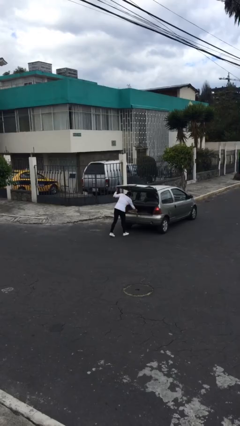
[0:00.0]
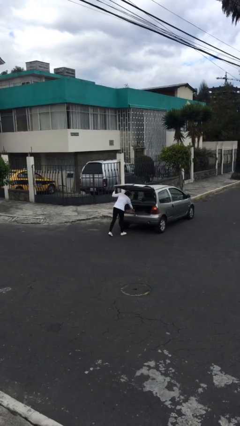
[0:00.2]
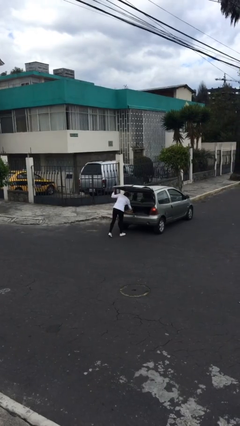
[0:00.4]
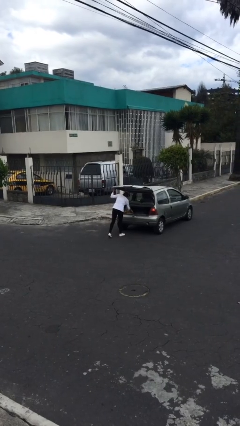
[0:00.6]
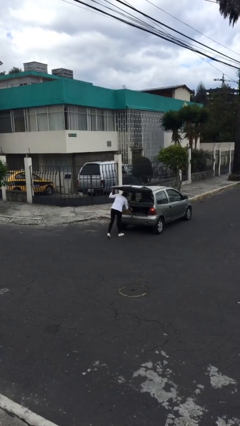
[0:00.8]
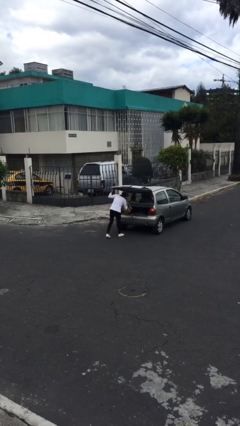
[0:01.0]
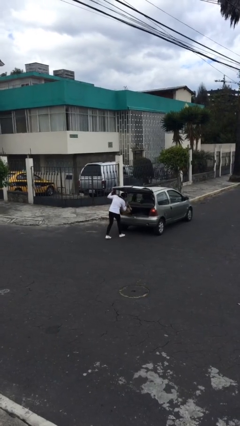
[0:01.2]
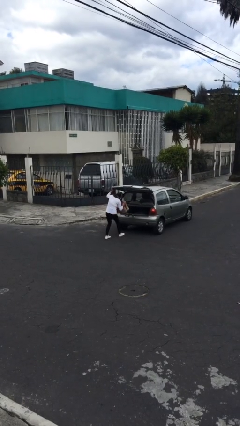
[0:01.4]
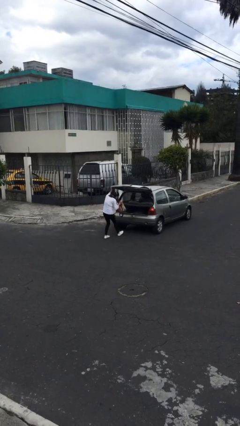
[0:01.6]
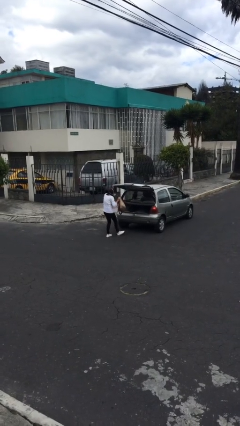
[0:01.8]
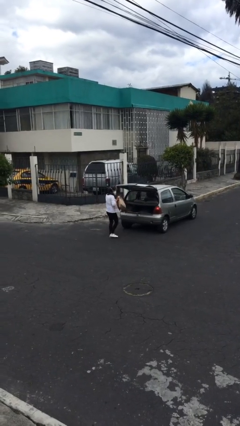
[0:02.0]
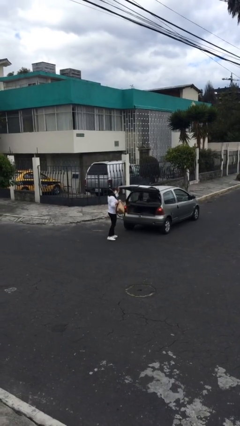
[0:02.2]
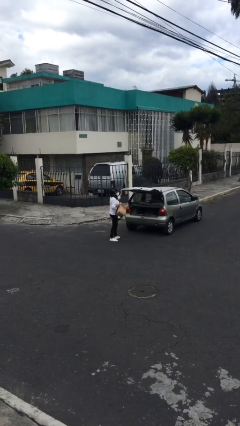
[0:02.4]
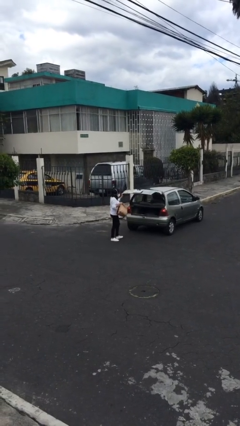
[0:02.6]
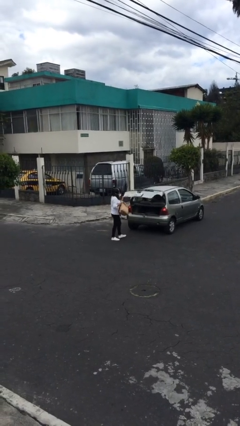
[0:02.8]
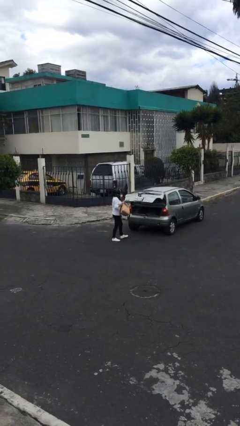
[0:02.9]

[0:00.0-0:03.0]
person unloads car

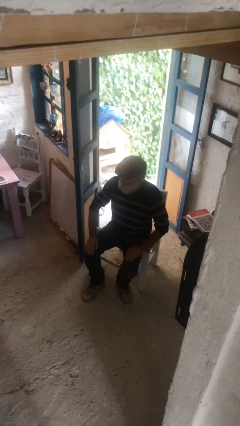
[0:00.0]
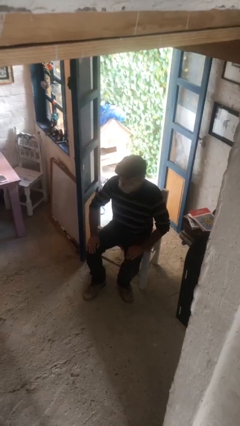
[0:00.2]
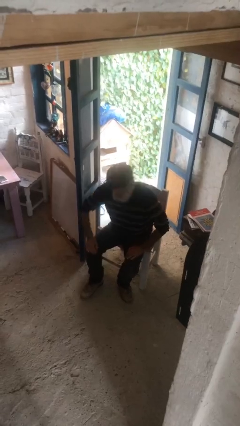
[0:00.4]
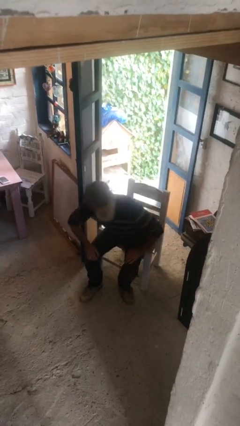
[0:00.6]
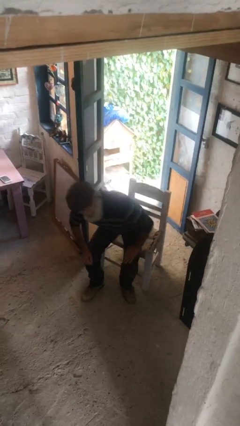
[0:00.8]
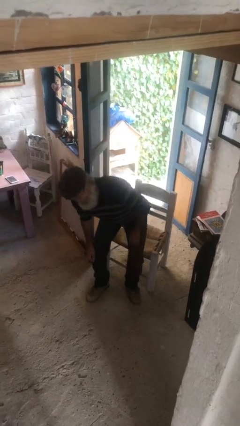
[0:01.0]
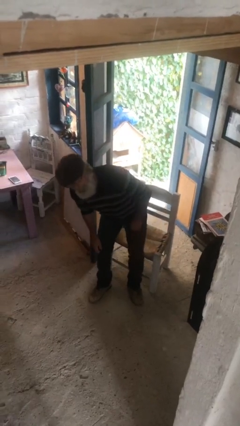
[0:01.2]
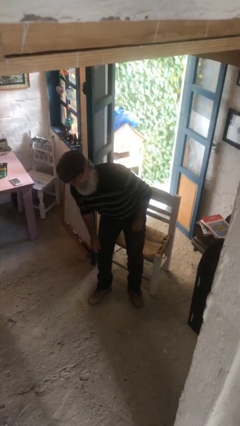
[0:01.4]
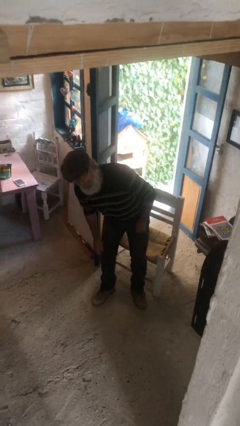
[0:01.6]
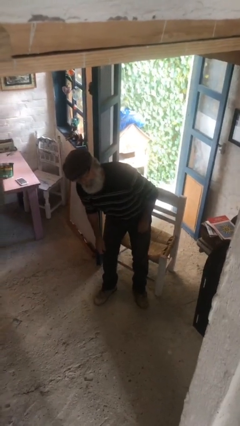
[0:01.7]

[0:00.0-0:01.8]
person stands up

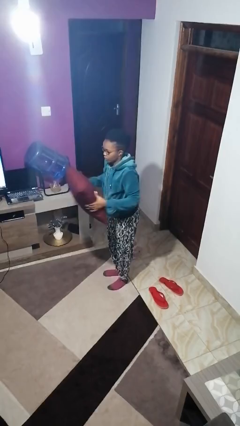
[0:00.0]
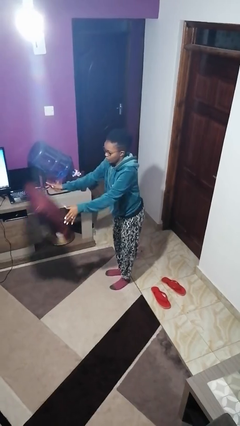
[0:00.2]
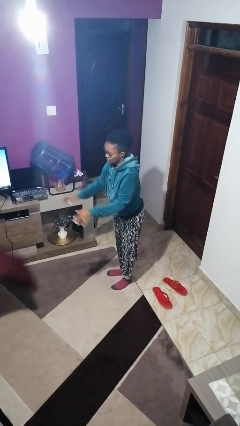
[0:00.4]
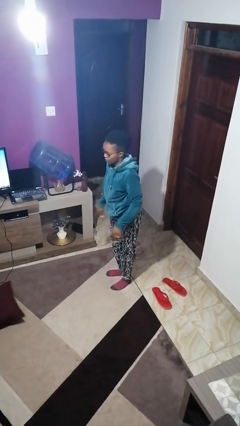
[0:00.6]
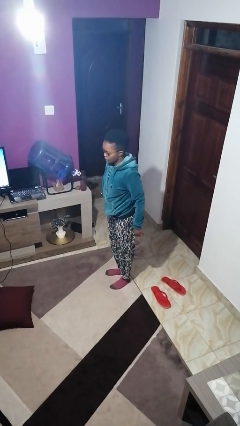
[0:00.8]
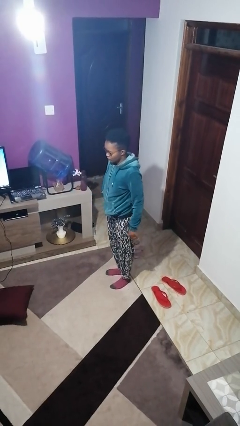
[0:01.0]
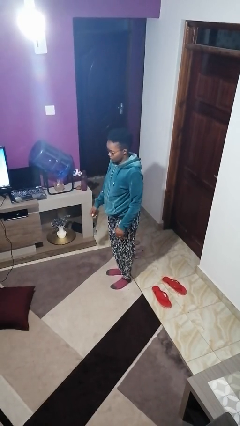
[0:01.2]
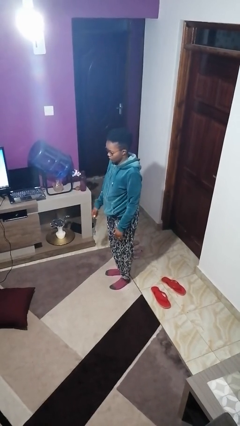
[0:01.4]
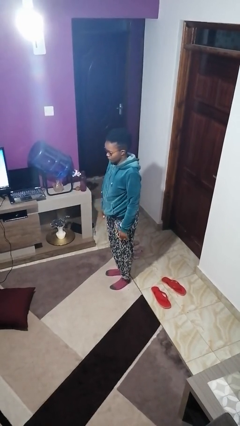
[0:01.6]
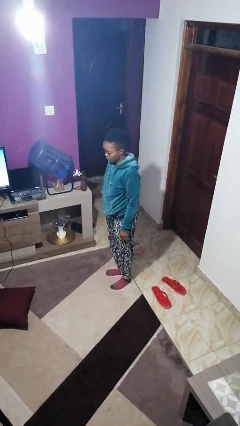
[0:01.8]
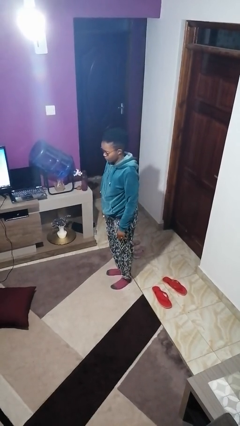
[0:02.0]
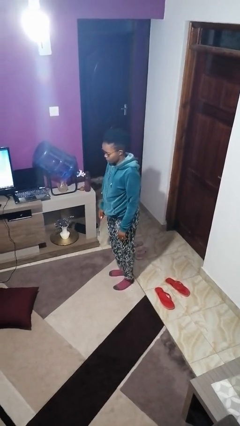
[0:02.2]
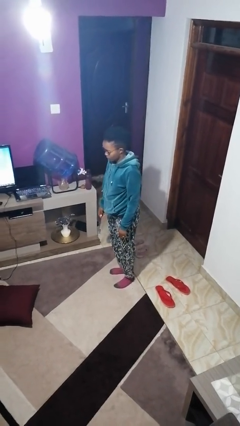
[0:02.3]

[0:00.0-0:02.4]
person throws object to ground

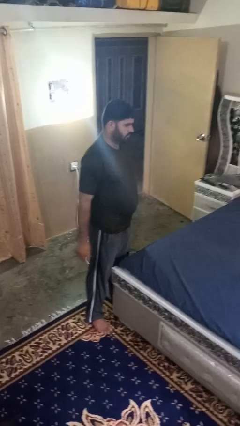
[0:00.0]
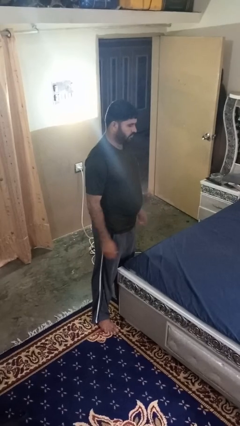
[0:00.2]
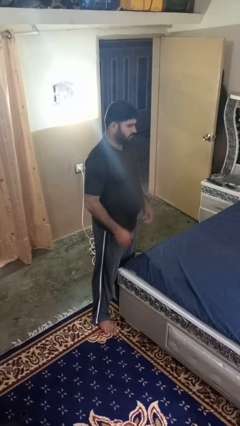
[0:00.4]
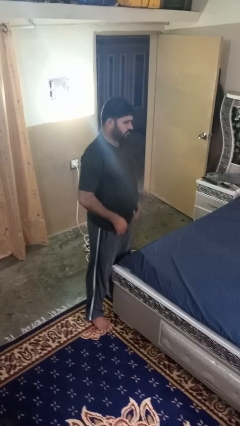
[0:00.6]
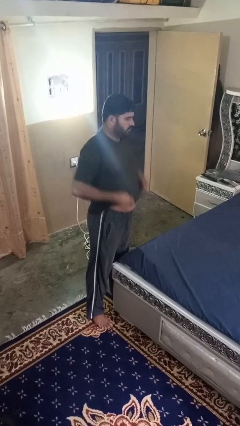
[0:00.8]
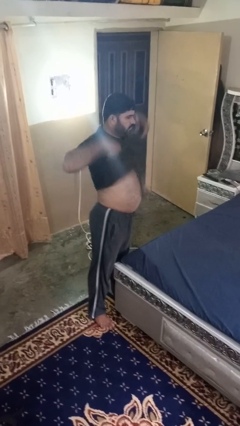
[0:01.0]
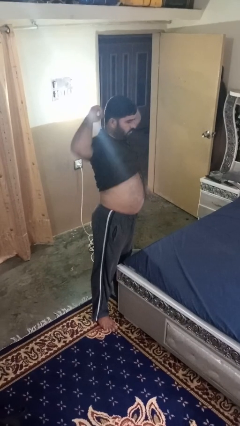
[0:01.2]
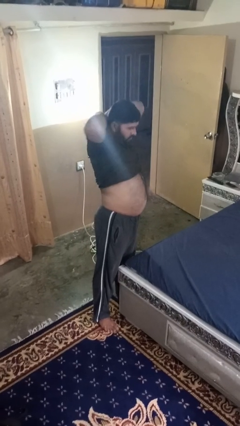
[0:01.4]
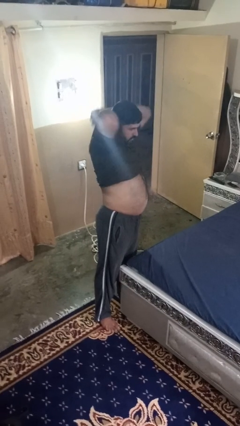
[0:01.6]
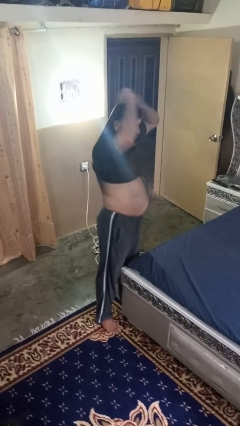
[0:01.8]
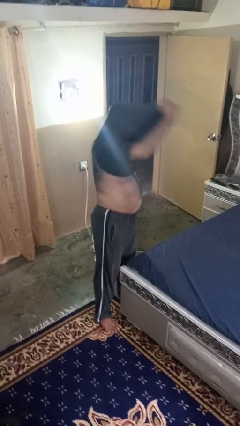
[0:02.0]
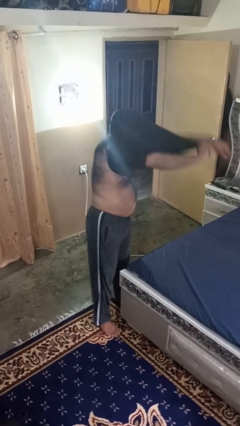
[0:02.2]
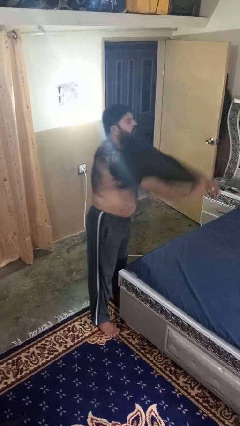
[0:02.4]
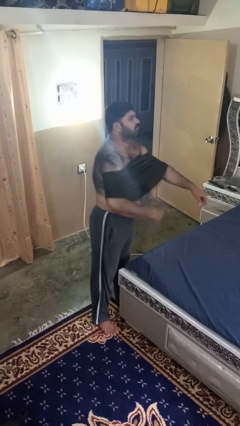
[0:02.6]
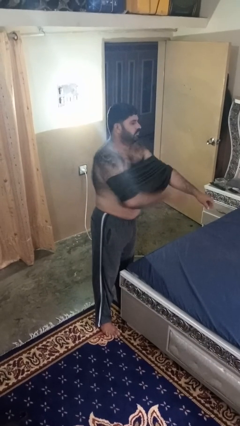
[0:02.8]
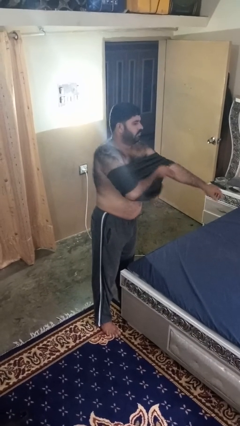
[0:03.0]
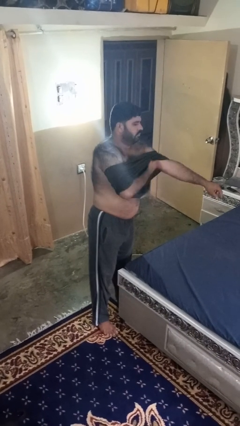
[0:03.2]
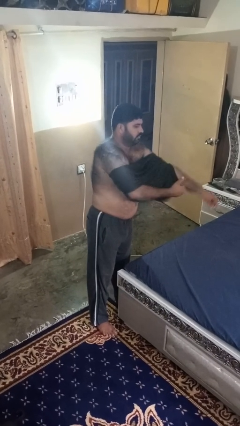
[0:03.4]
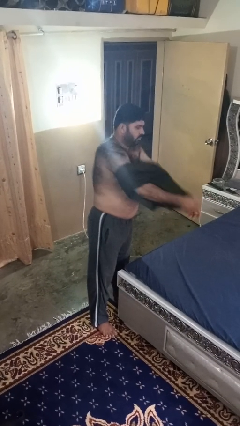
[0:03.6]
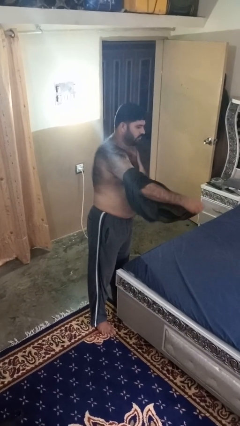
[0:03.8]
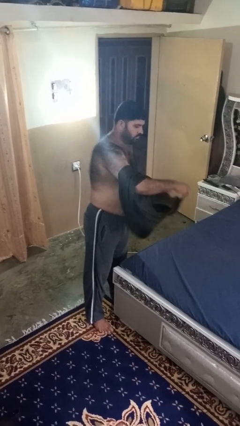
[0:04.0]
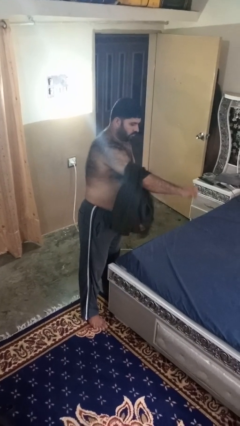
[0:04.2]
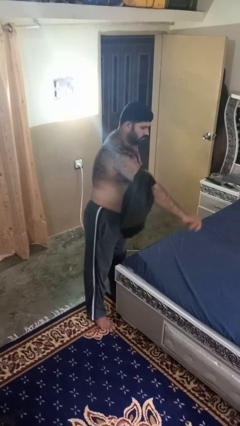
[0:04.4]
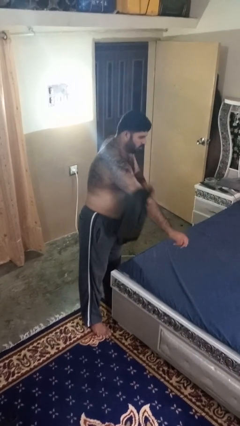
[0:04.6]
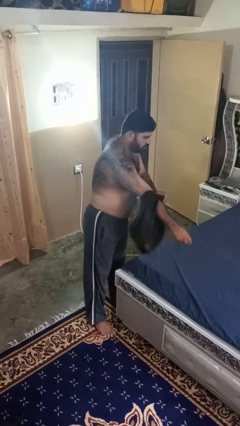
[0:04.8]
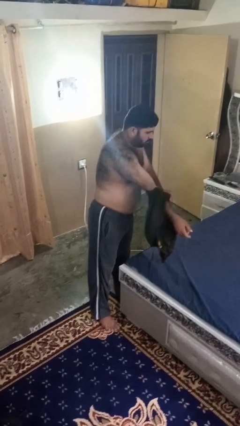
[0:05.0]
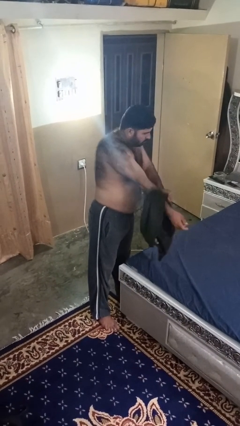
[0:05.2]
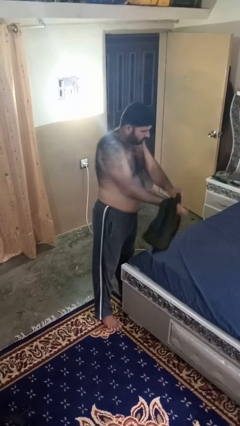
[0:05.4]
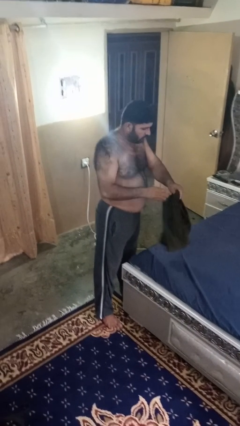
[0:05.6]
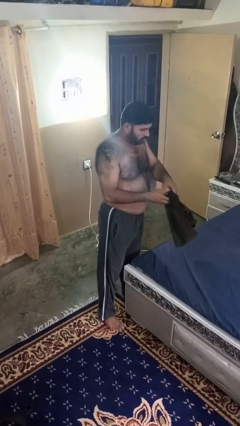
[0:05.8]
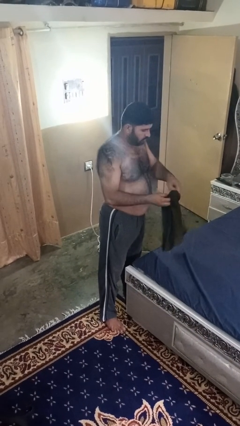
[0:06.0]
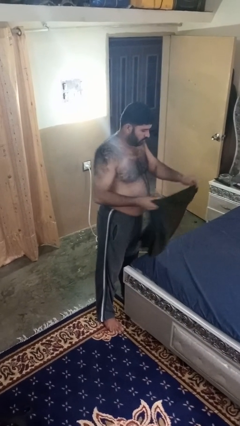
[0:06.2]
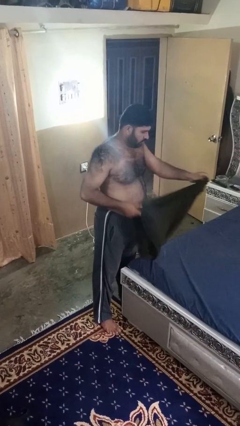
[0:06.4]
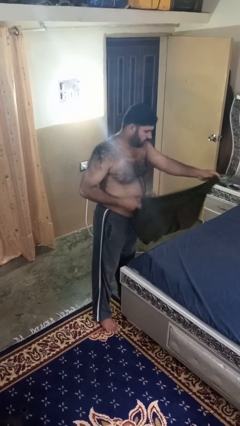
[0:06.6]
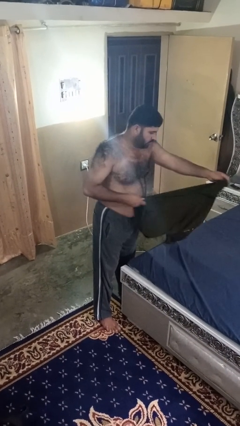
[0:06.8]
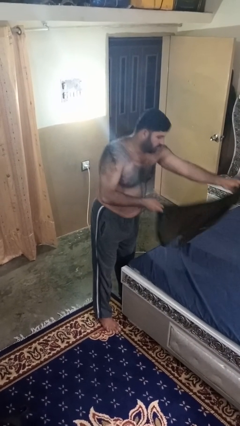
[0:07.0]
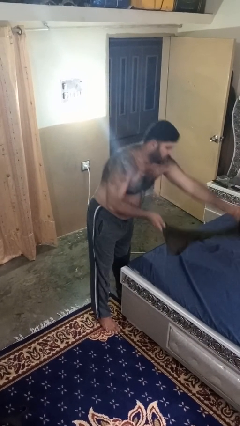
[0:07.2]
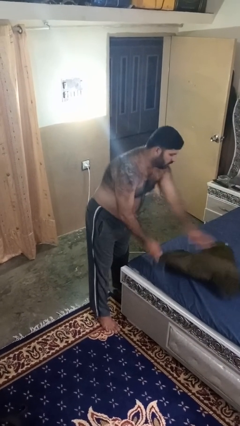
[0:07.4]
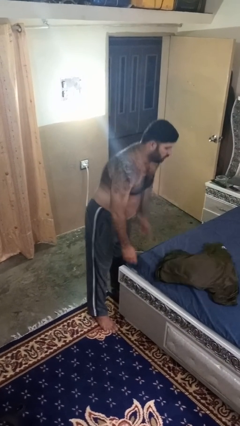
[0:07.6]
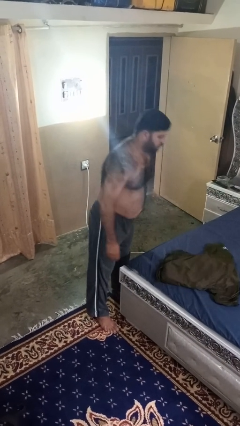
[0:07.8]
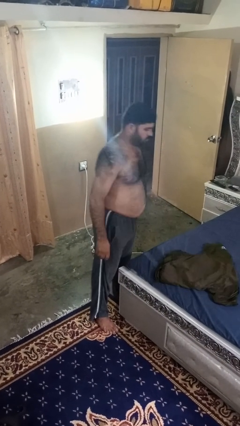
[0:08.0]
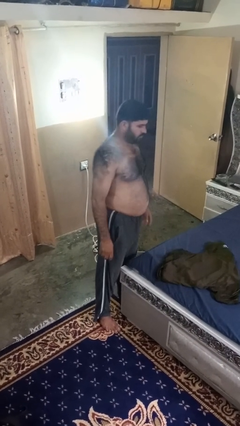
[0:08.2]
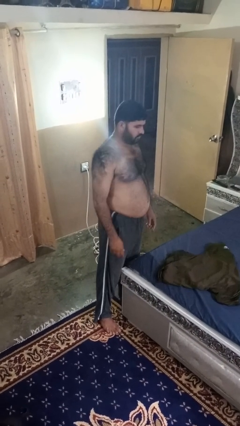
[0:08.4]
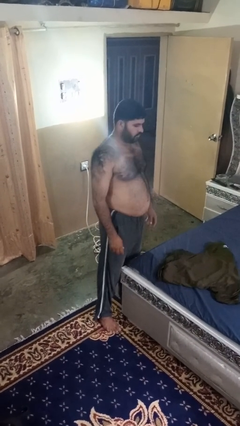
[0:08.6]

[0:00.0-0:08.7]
person takes off shirt

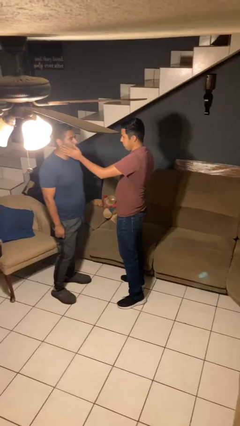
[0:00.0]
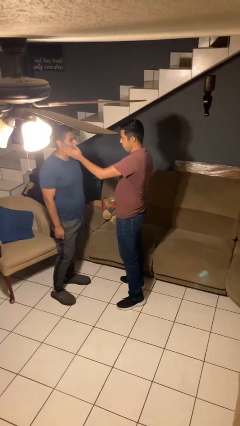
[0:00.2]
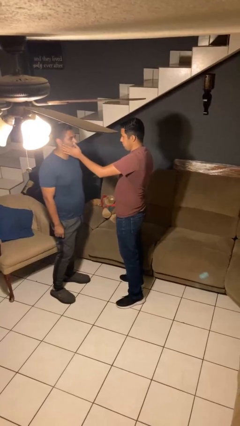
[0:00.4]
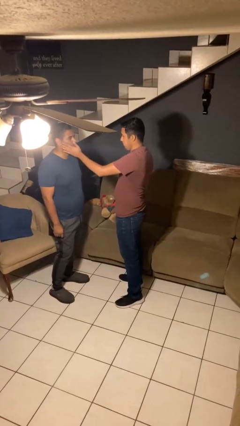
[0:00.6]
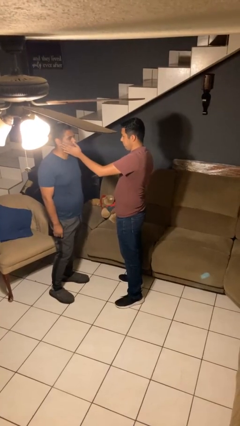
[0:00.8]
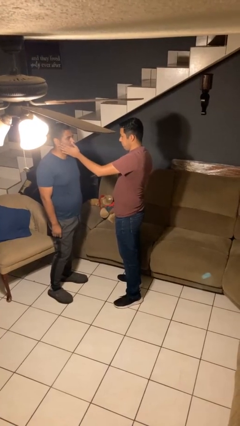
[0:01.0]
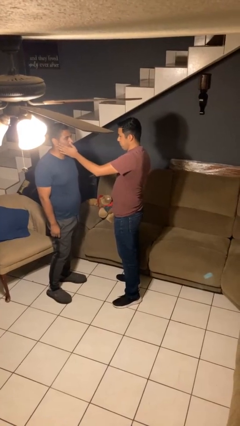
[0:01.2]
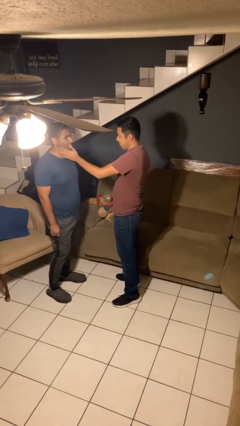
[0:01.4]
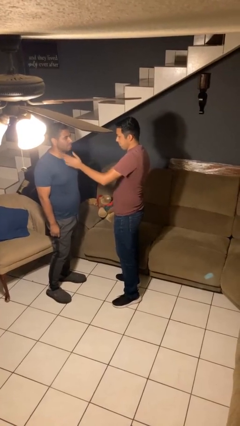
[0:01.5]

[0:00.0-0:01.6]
person touches face of person

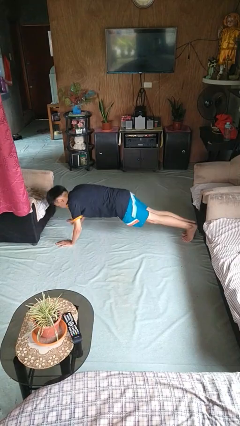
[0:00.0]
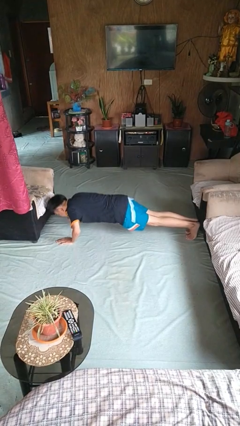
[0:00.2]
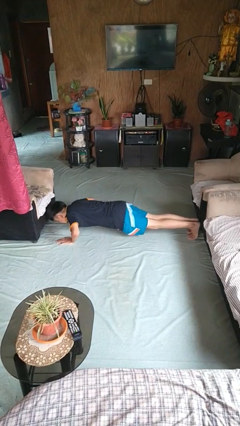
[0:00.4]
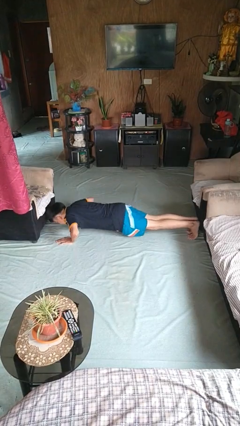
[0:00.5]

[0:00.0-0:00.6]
person exercises with pushup
